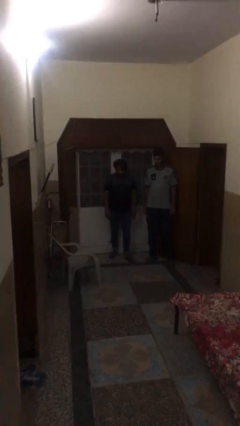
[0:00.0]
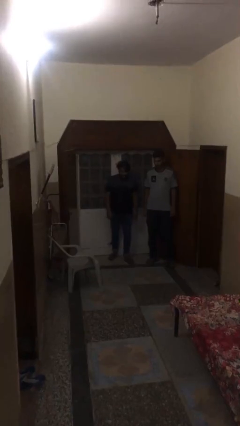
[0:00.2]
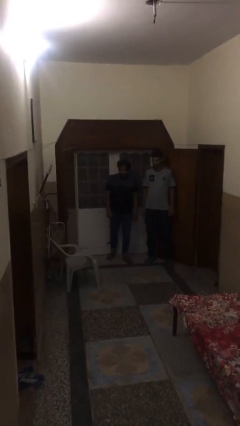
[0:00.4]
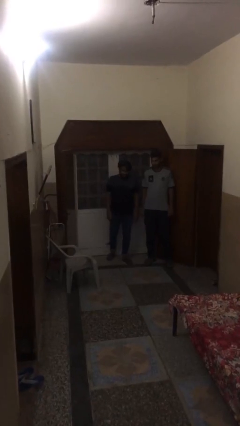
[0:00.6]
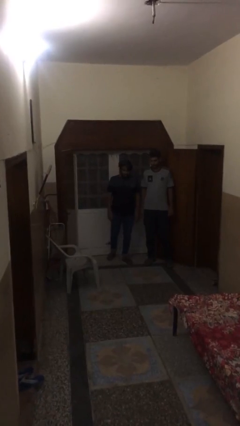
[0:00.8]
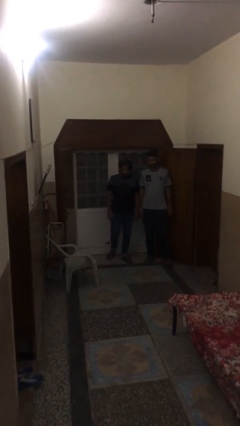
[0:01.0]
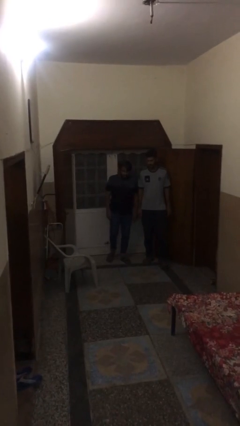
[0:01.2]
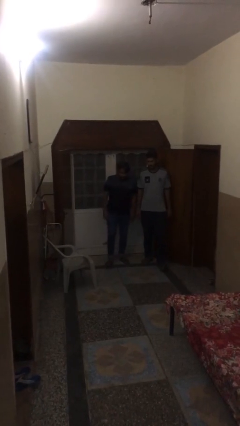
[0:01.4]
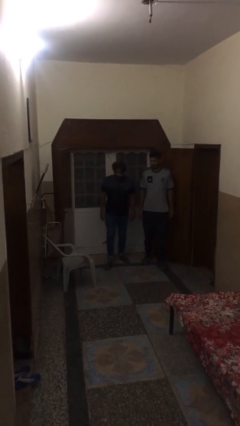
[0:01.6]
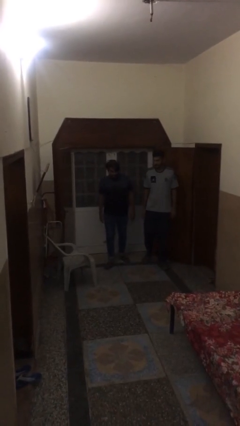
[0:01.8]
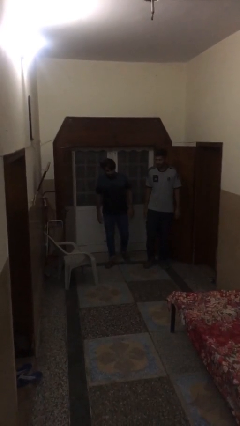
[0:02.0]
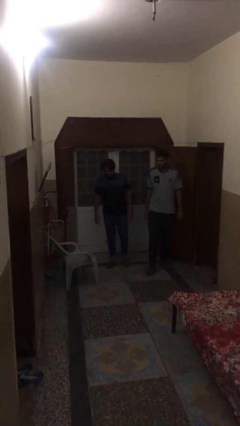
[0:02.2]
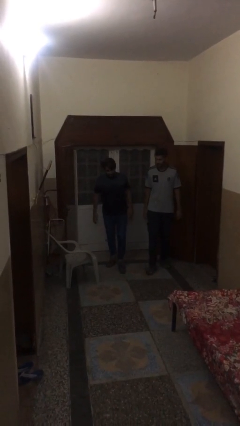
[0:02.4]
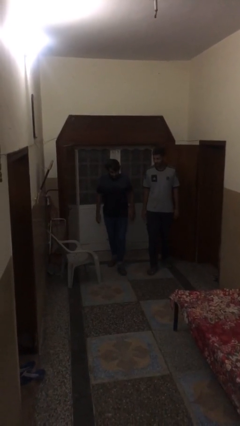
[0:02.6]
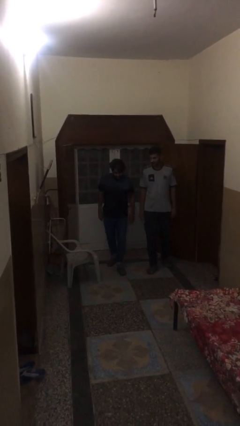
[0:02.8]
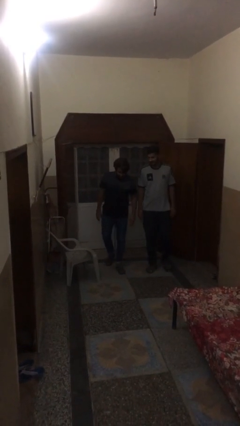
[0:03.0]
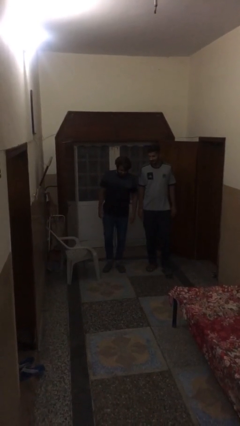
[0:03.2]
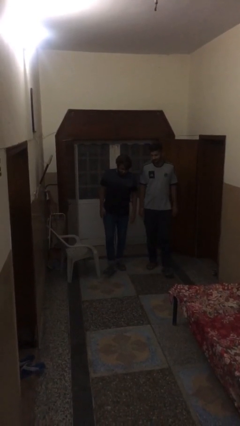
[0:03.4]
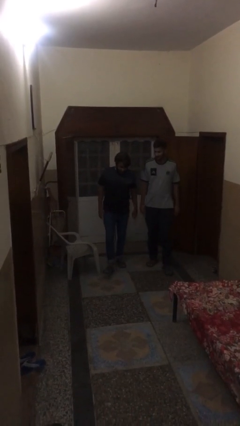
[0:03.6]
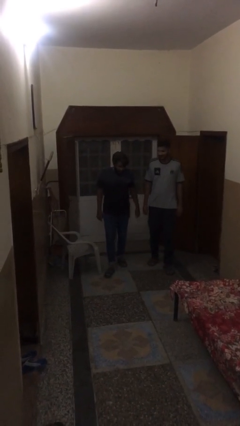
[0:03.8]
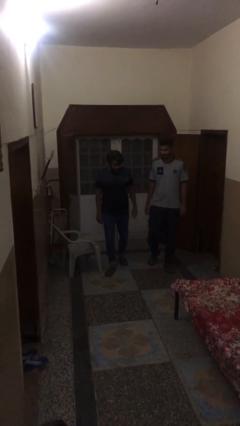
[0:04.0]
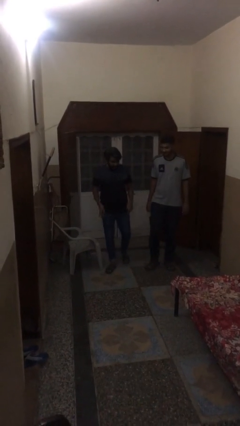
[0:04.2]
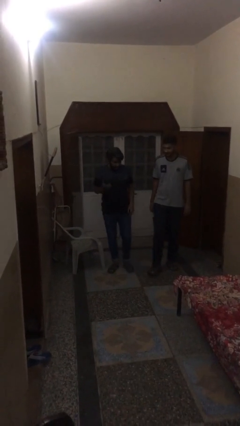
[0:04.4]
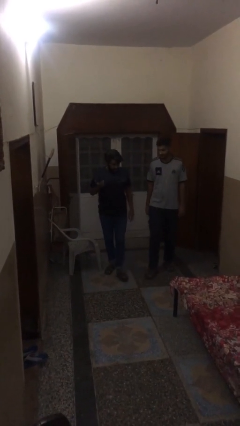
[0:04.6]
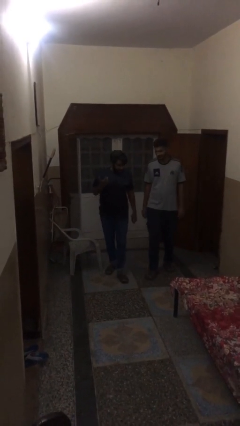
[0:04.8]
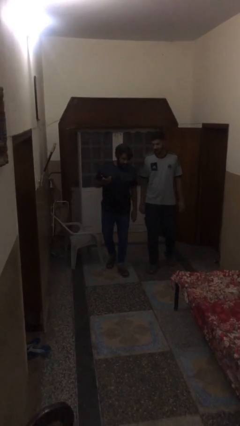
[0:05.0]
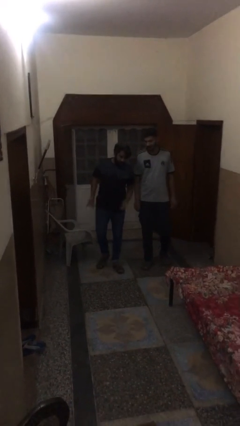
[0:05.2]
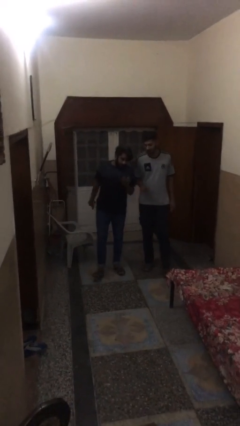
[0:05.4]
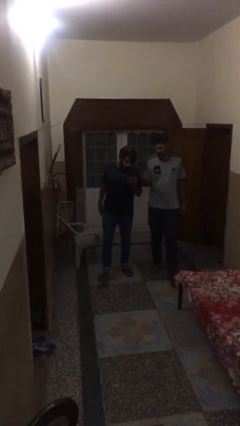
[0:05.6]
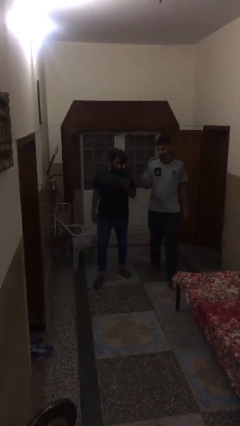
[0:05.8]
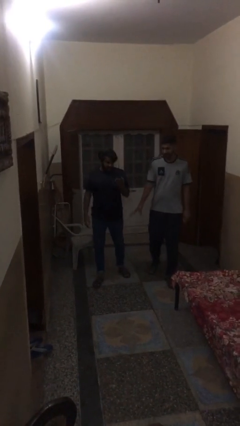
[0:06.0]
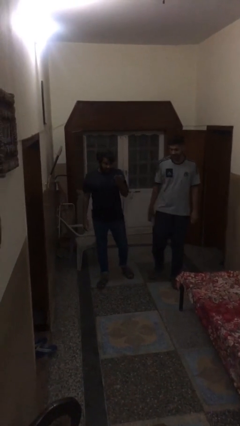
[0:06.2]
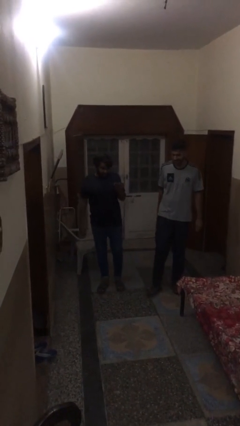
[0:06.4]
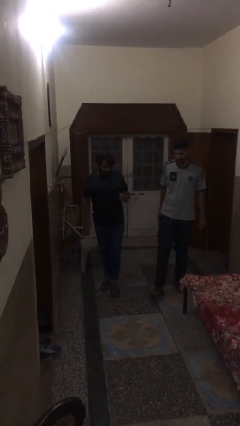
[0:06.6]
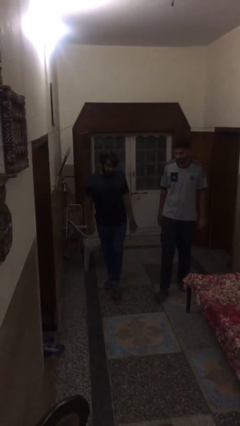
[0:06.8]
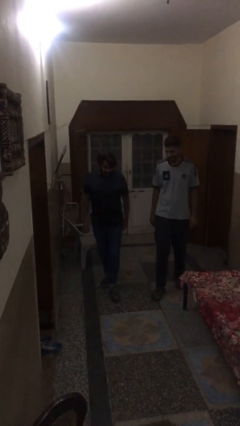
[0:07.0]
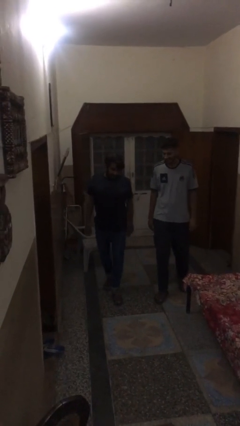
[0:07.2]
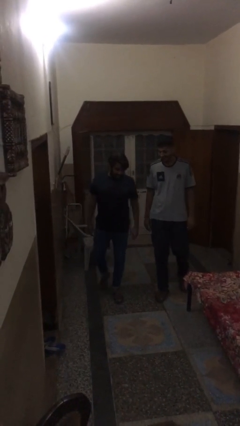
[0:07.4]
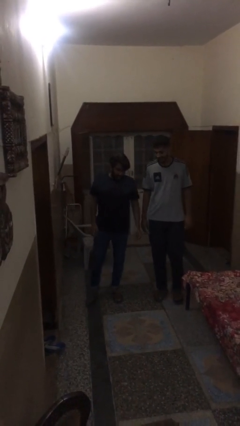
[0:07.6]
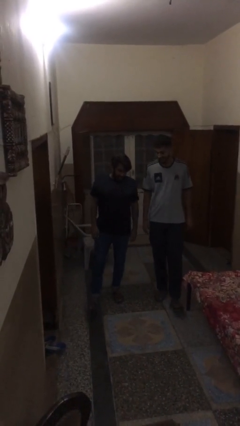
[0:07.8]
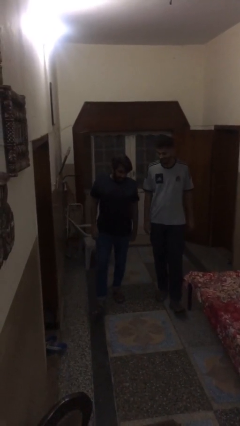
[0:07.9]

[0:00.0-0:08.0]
person talks to person

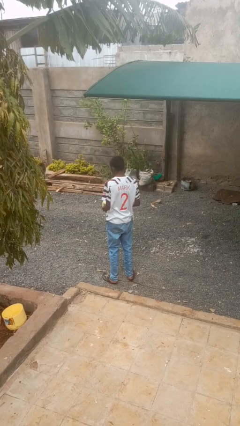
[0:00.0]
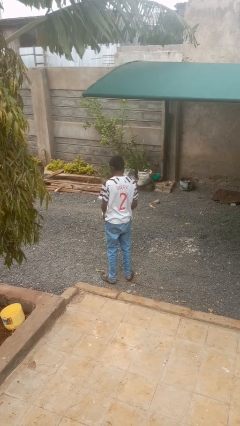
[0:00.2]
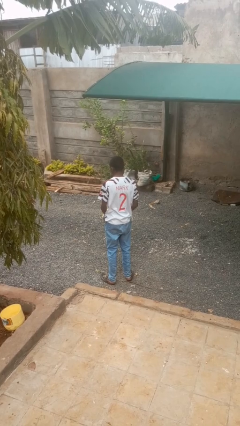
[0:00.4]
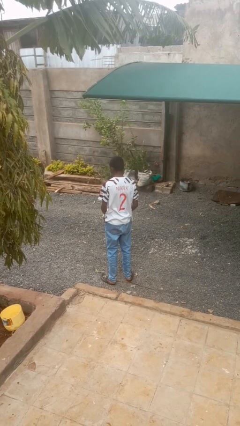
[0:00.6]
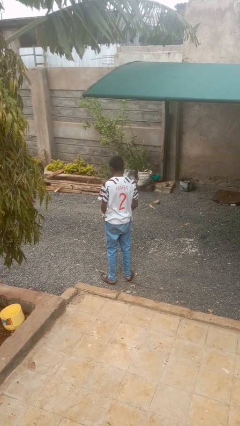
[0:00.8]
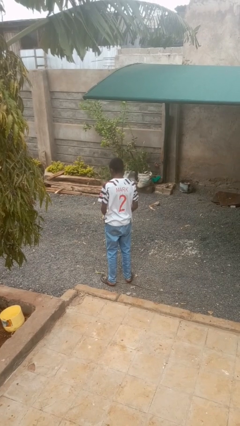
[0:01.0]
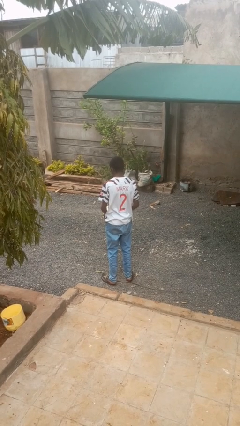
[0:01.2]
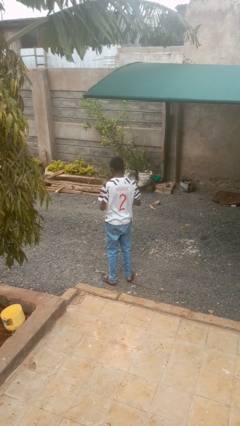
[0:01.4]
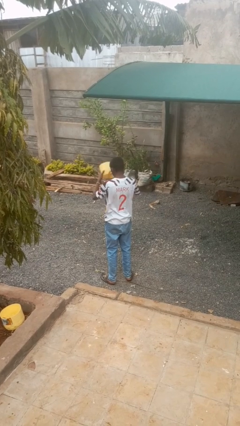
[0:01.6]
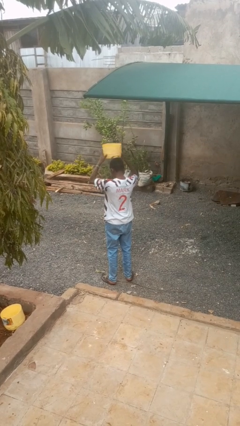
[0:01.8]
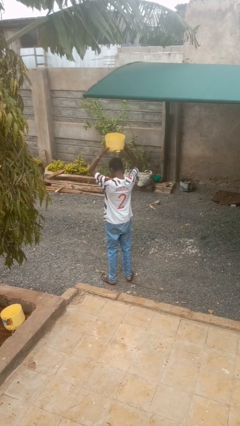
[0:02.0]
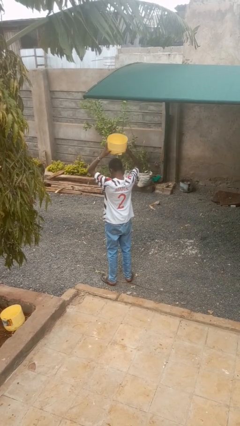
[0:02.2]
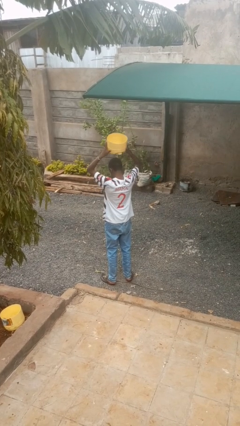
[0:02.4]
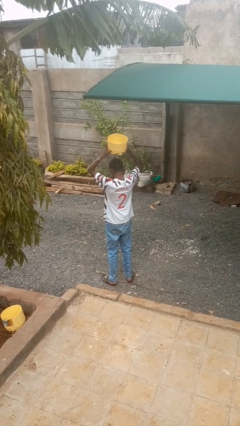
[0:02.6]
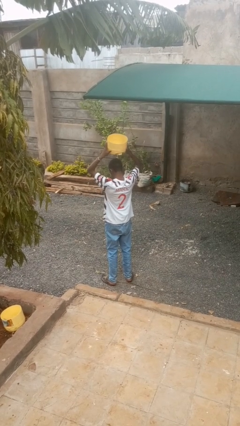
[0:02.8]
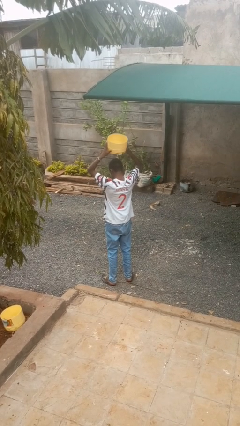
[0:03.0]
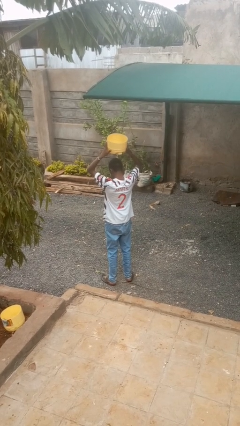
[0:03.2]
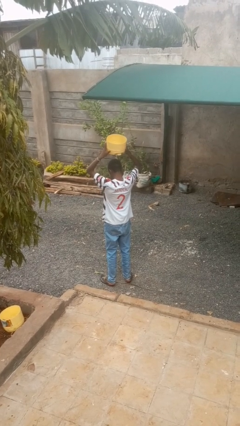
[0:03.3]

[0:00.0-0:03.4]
person holds object above head

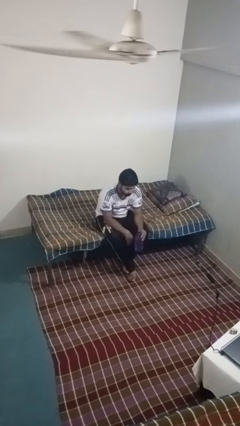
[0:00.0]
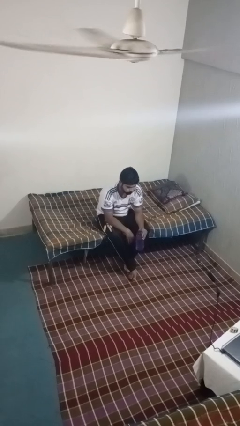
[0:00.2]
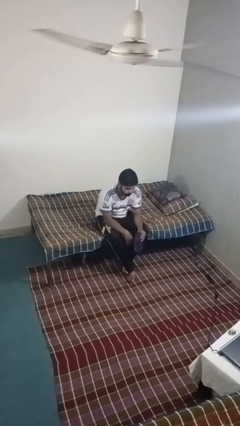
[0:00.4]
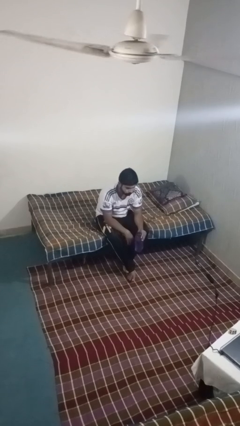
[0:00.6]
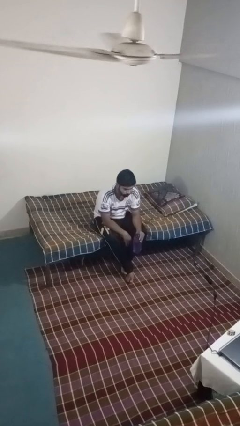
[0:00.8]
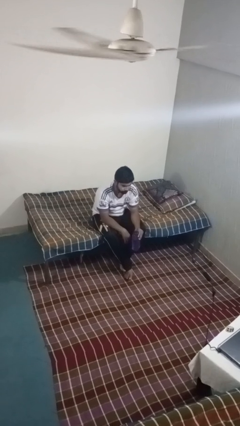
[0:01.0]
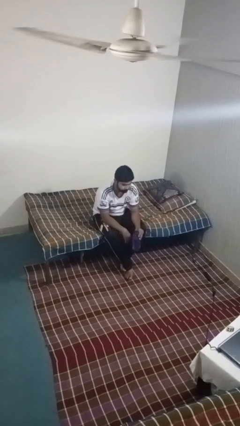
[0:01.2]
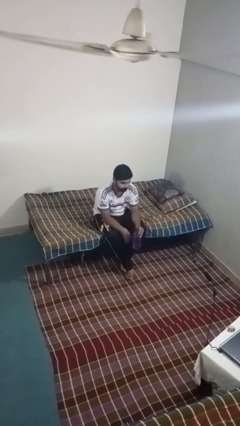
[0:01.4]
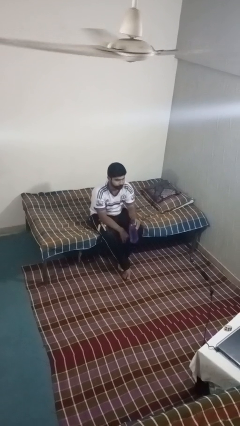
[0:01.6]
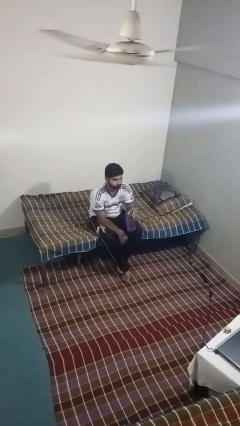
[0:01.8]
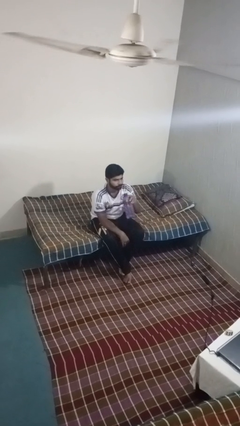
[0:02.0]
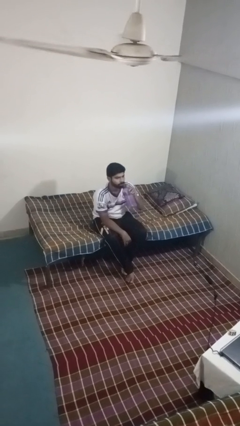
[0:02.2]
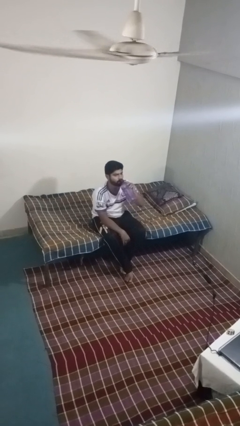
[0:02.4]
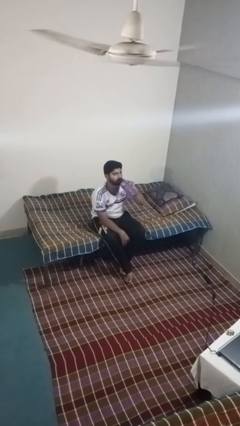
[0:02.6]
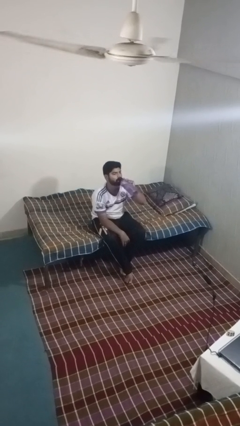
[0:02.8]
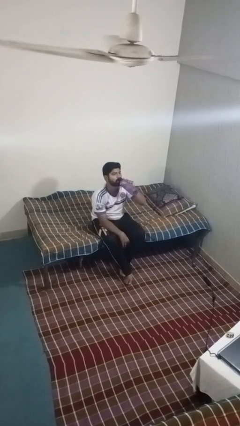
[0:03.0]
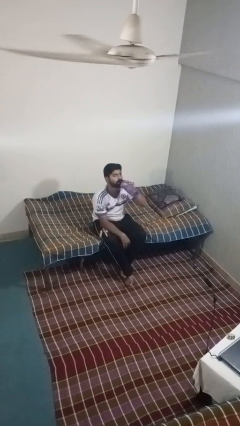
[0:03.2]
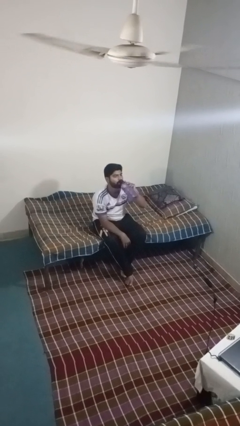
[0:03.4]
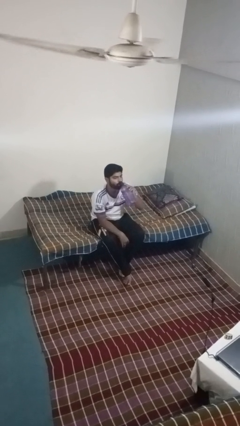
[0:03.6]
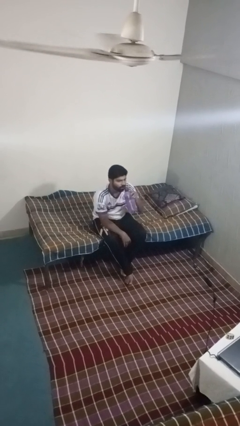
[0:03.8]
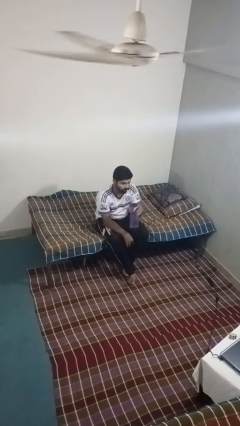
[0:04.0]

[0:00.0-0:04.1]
person drinks from bottle

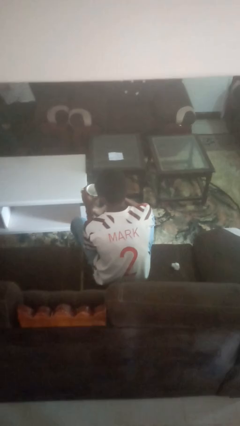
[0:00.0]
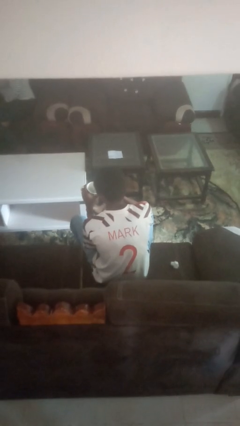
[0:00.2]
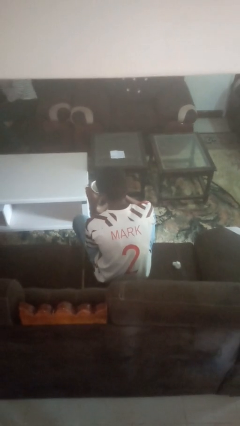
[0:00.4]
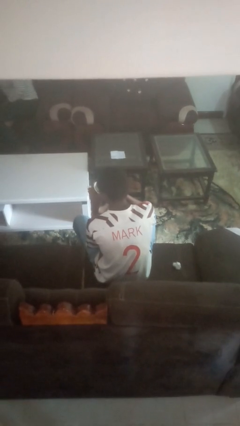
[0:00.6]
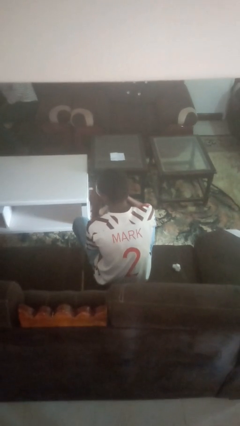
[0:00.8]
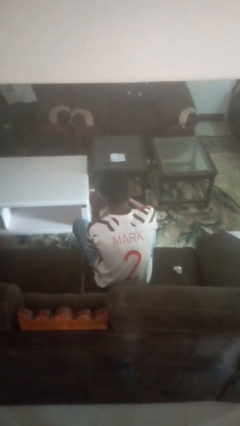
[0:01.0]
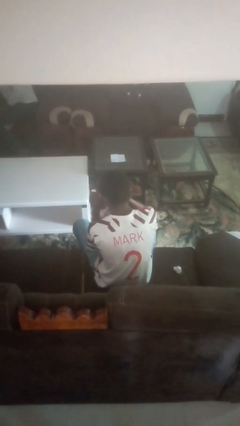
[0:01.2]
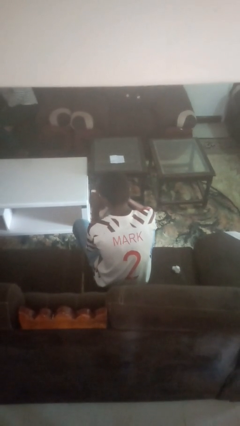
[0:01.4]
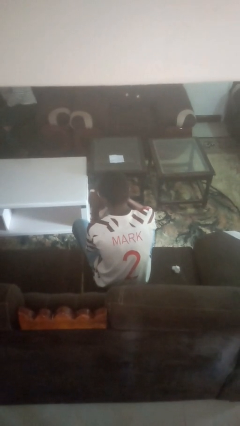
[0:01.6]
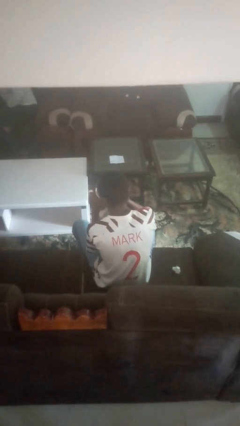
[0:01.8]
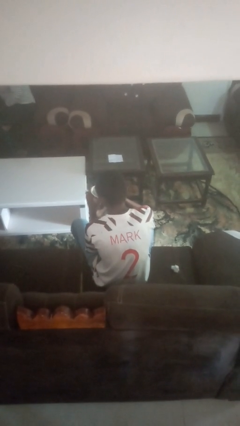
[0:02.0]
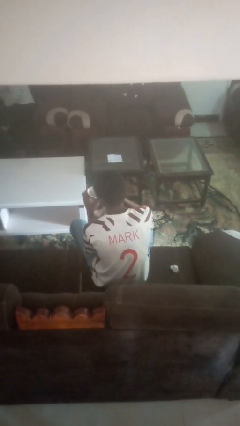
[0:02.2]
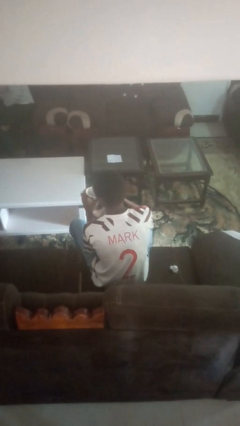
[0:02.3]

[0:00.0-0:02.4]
person drinks from mug
